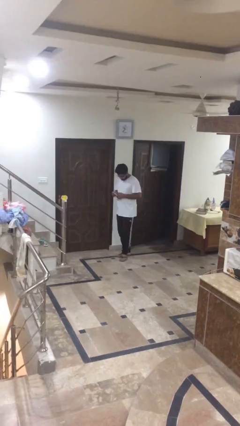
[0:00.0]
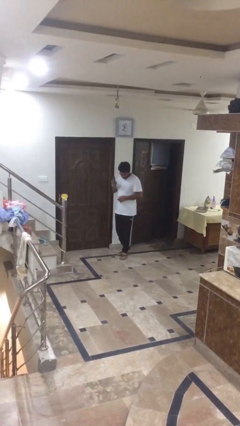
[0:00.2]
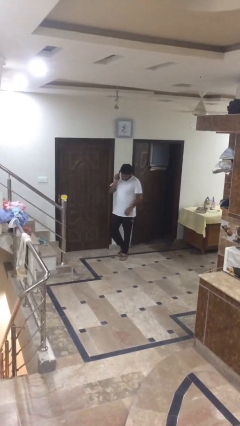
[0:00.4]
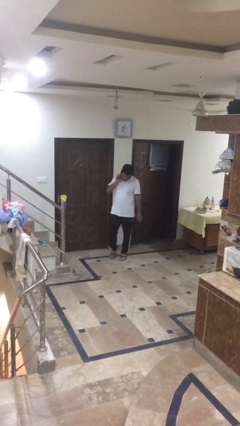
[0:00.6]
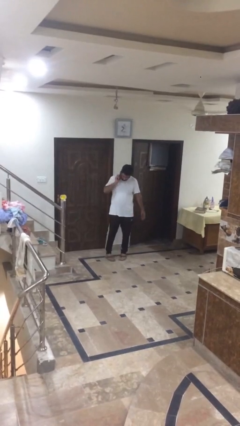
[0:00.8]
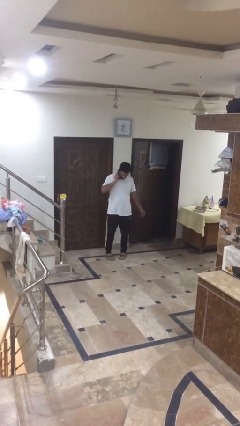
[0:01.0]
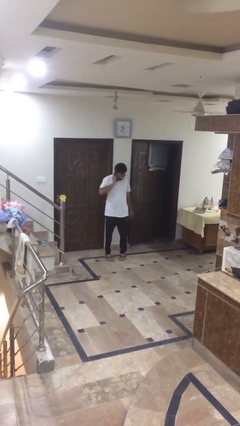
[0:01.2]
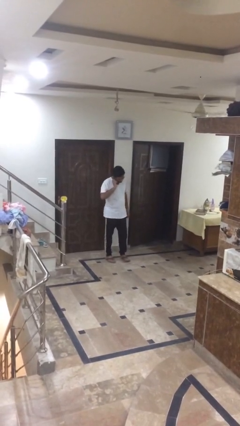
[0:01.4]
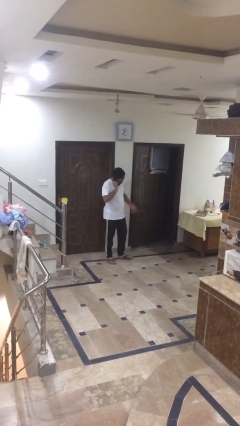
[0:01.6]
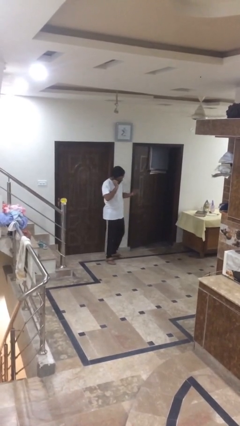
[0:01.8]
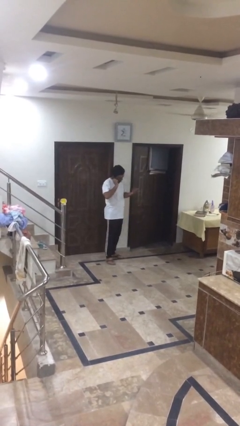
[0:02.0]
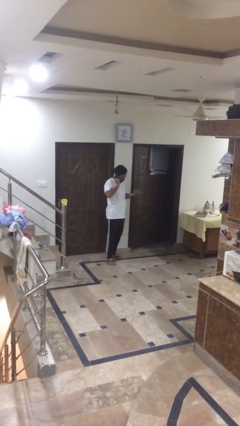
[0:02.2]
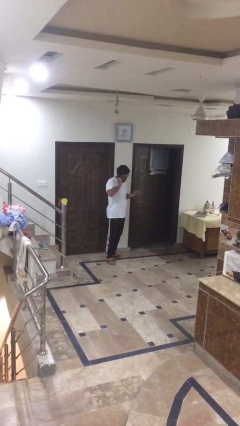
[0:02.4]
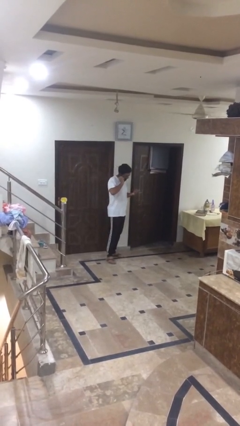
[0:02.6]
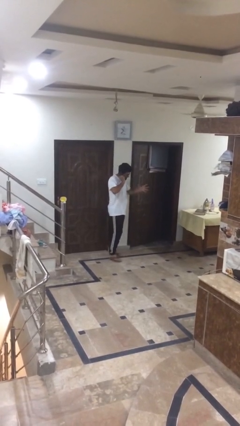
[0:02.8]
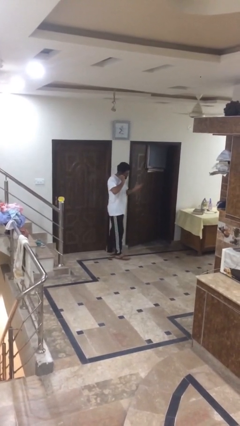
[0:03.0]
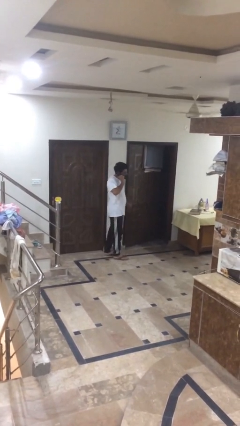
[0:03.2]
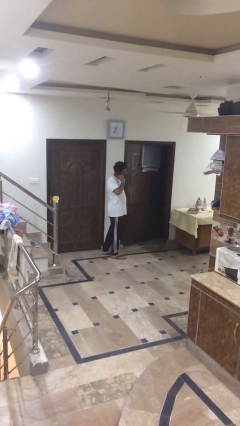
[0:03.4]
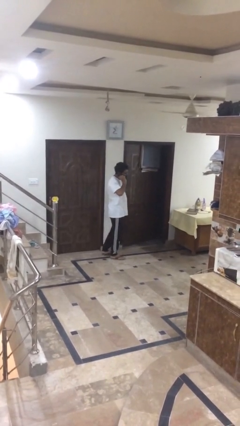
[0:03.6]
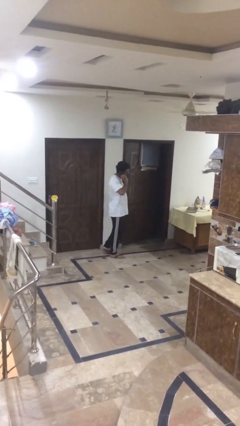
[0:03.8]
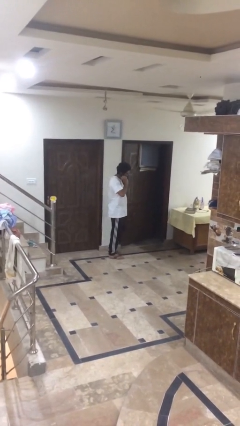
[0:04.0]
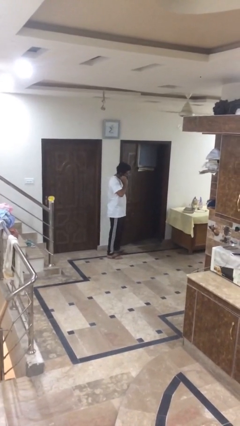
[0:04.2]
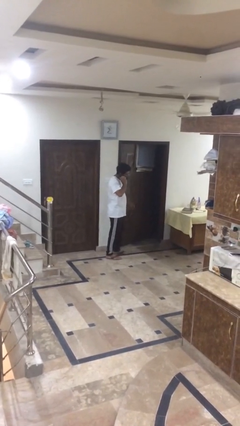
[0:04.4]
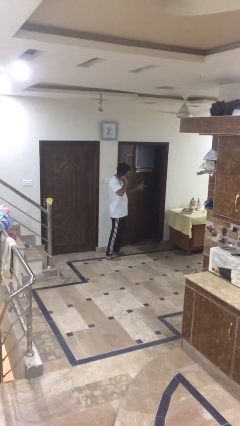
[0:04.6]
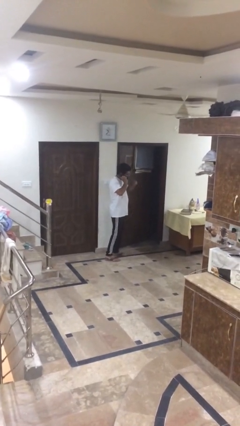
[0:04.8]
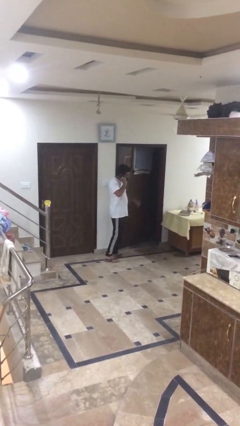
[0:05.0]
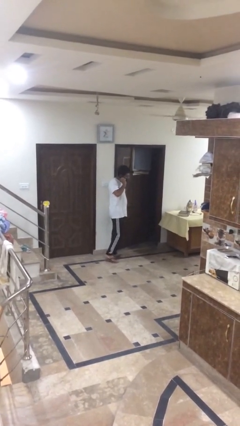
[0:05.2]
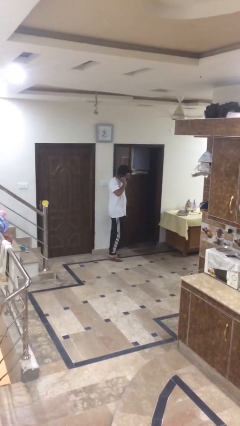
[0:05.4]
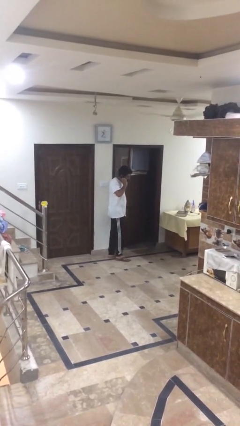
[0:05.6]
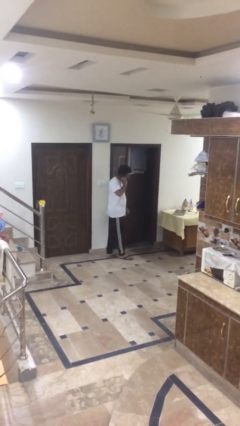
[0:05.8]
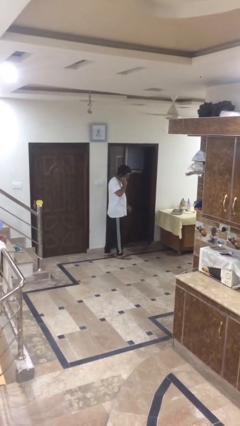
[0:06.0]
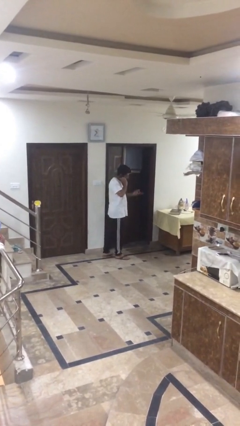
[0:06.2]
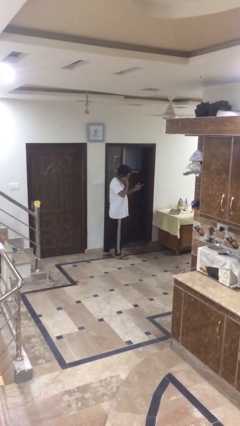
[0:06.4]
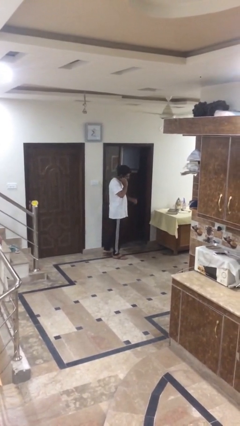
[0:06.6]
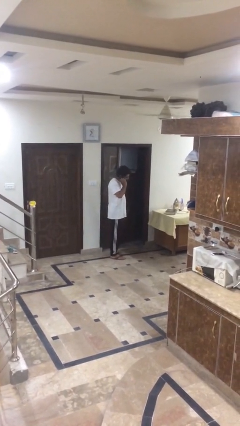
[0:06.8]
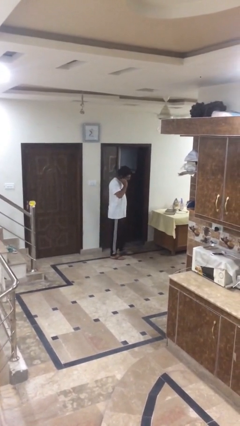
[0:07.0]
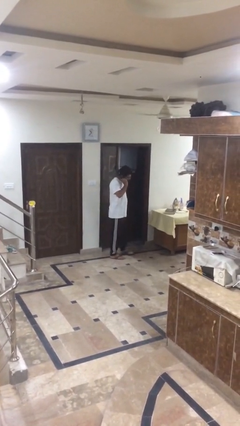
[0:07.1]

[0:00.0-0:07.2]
person talks on phone

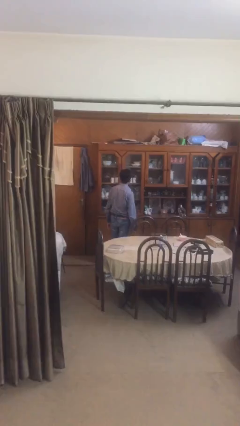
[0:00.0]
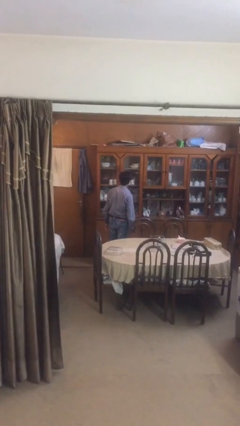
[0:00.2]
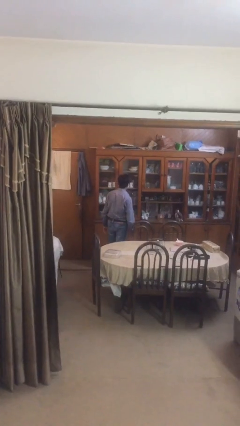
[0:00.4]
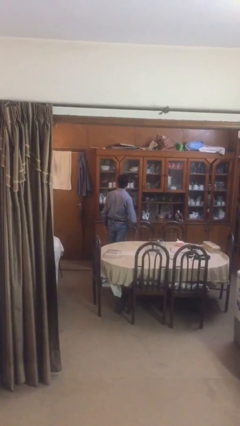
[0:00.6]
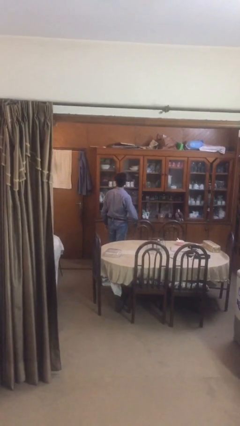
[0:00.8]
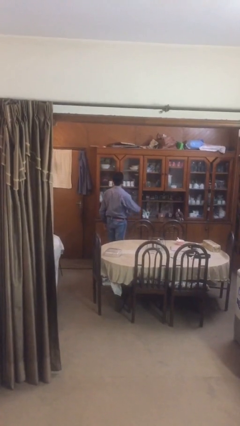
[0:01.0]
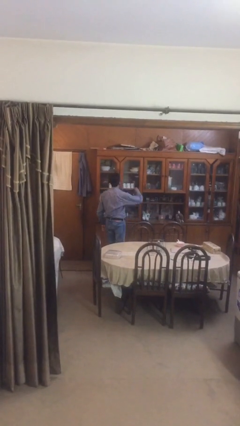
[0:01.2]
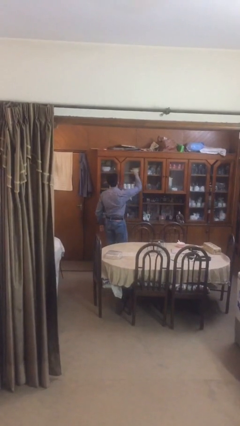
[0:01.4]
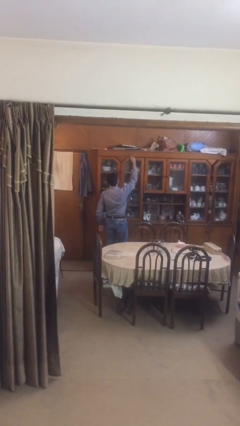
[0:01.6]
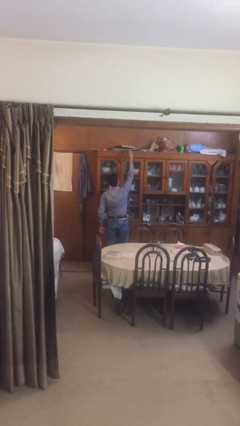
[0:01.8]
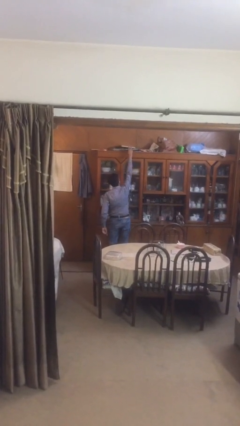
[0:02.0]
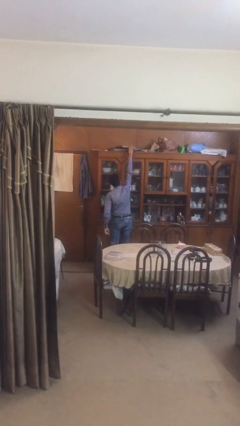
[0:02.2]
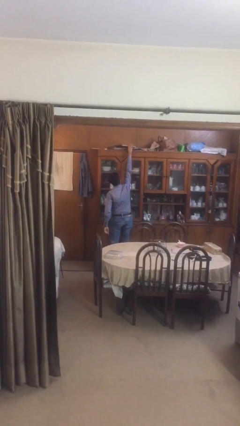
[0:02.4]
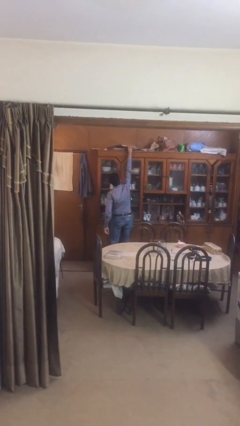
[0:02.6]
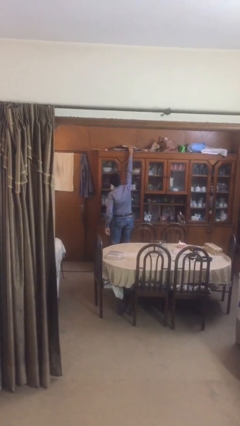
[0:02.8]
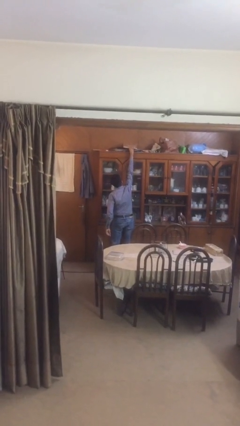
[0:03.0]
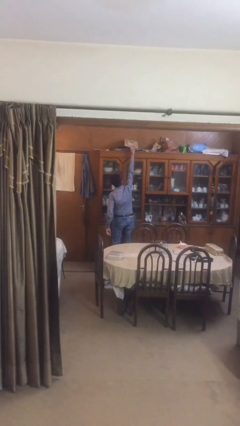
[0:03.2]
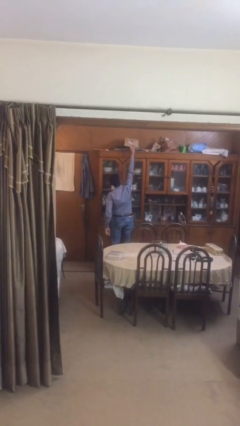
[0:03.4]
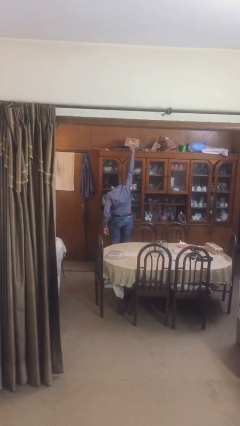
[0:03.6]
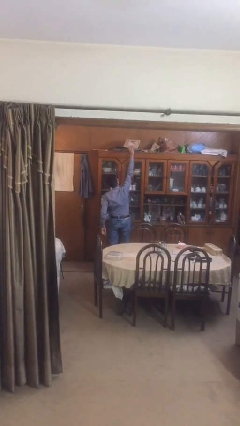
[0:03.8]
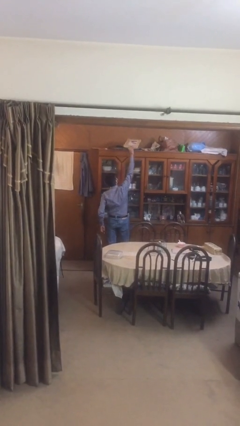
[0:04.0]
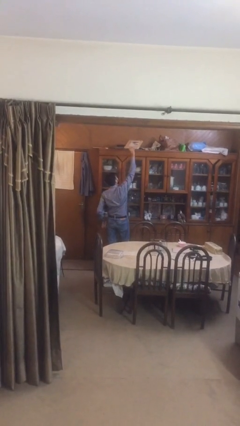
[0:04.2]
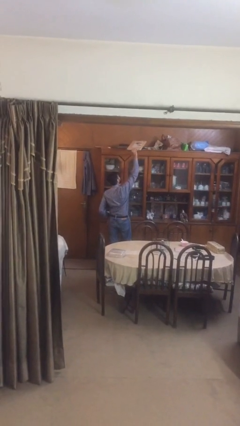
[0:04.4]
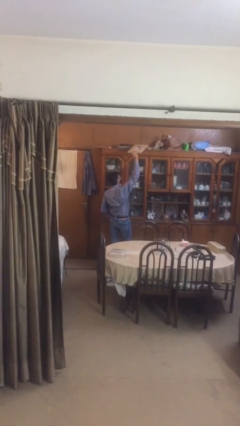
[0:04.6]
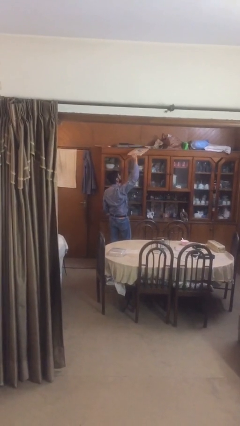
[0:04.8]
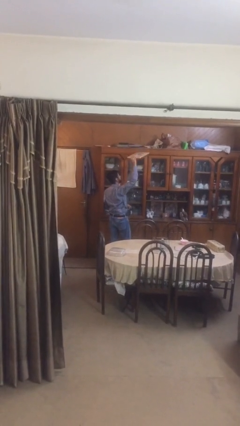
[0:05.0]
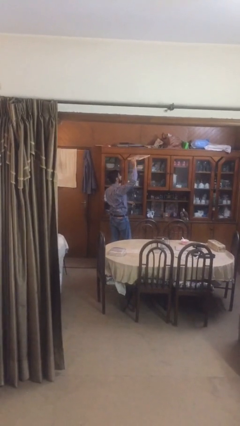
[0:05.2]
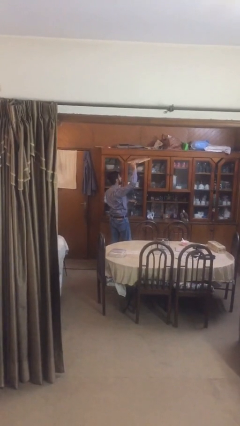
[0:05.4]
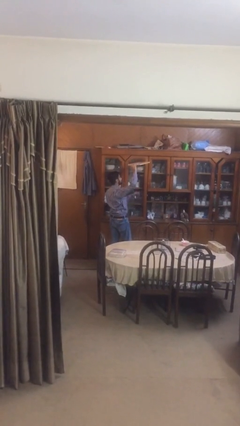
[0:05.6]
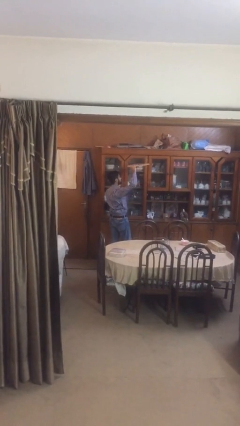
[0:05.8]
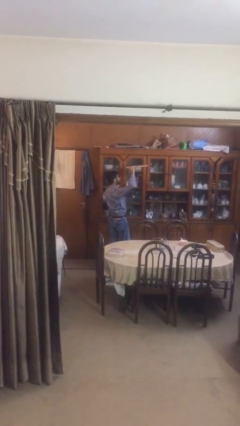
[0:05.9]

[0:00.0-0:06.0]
person picks up object from shelf

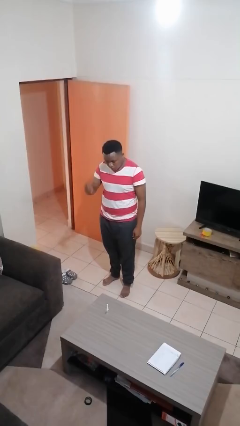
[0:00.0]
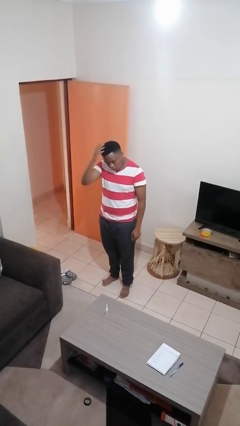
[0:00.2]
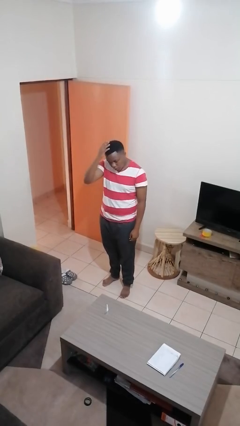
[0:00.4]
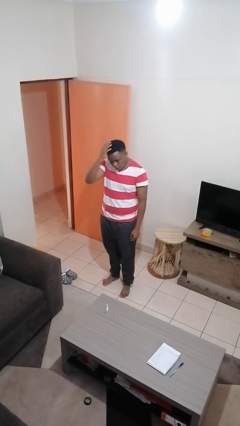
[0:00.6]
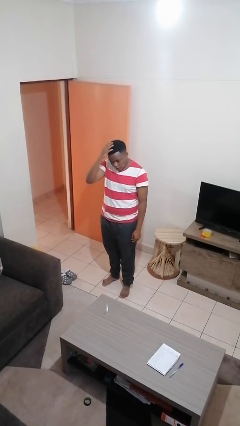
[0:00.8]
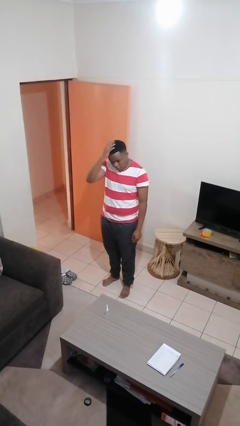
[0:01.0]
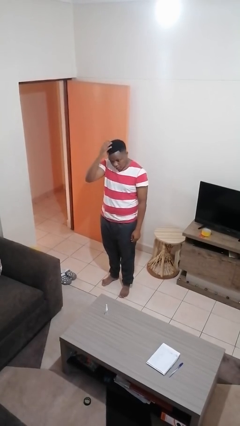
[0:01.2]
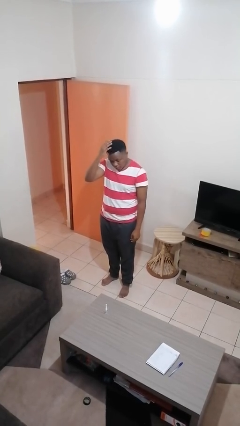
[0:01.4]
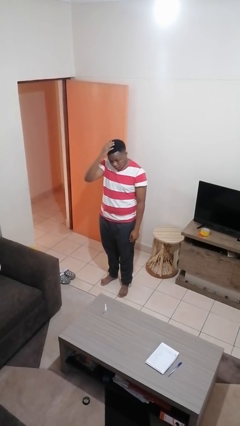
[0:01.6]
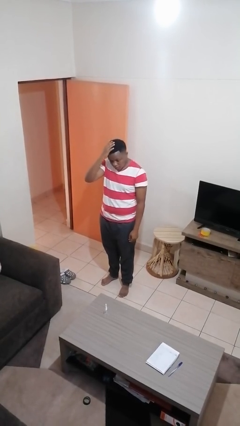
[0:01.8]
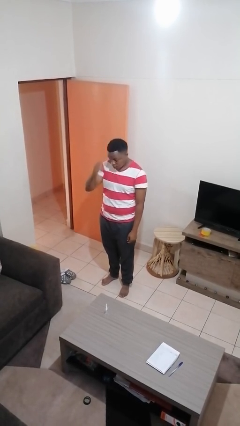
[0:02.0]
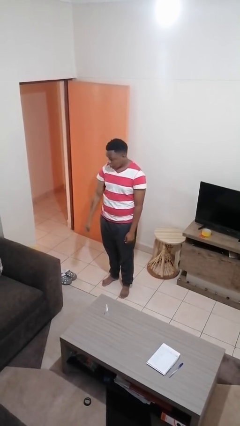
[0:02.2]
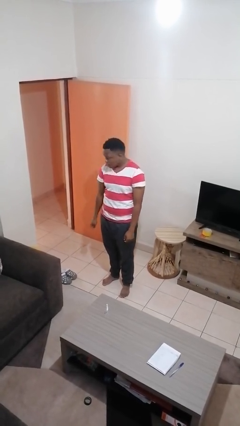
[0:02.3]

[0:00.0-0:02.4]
person pats head

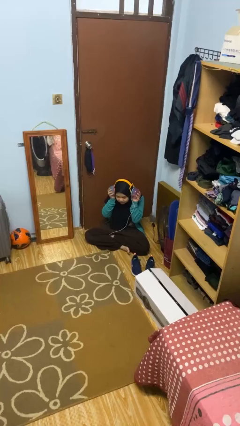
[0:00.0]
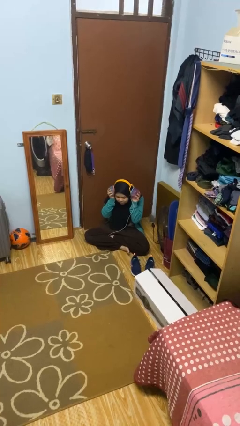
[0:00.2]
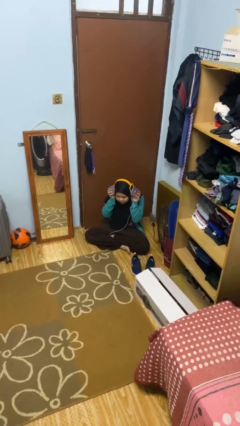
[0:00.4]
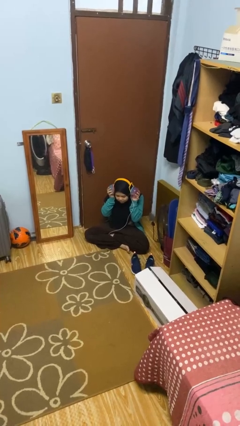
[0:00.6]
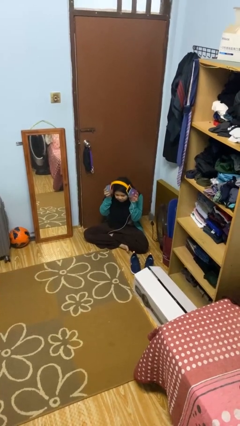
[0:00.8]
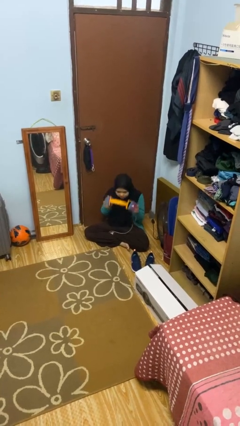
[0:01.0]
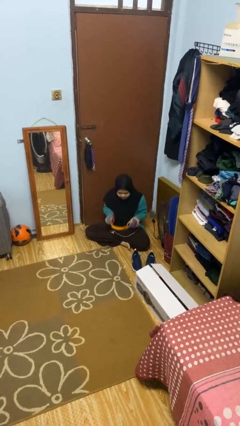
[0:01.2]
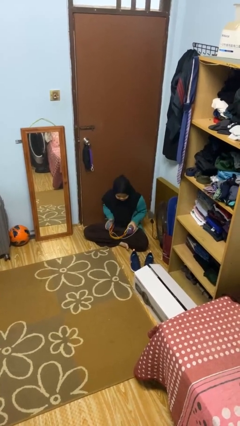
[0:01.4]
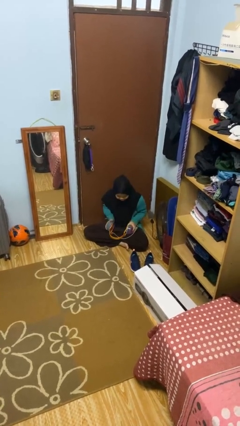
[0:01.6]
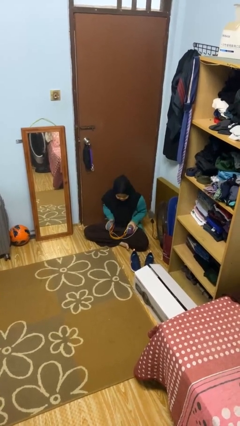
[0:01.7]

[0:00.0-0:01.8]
person takes off headphones

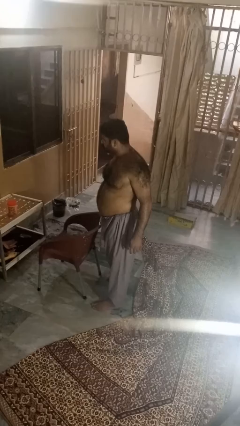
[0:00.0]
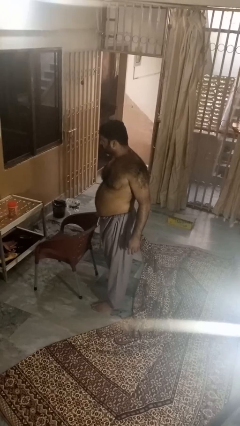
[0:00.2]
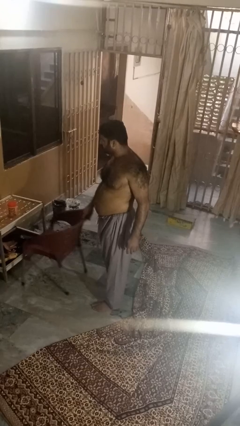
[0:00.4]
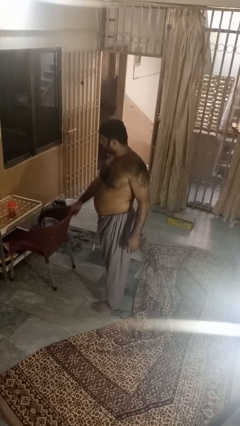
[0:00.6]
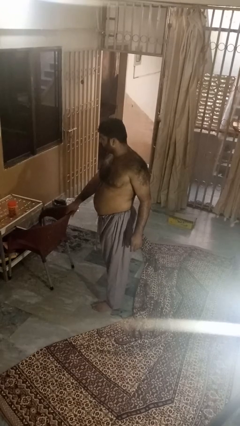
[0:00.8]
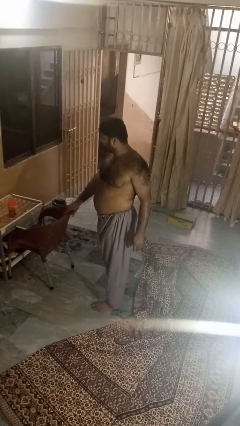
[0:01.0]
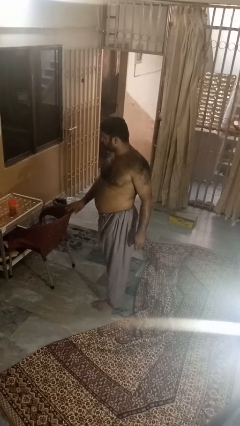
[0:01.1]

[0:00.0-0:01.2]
person pushes in chair
